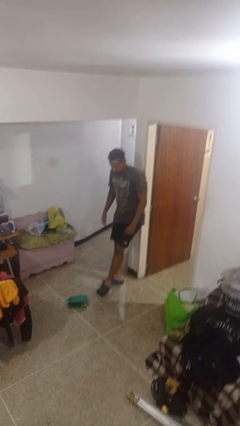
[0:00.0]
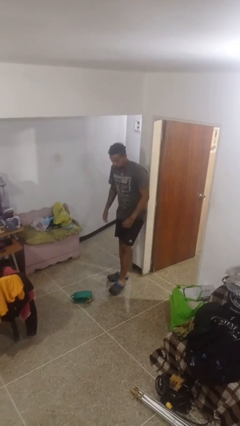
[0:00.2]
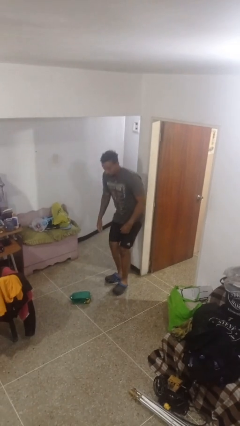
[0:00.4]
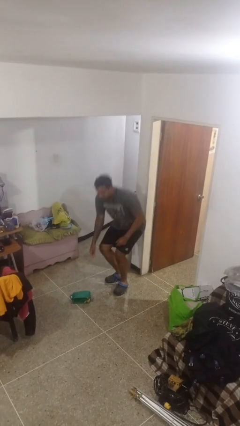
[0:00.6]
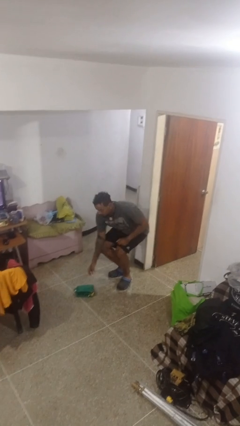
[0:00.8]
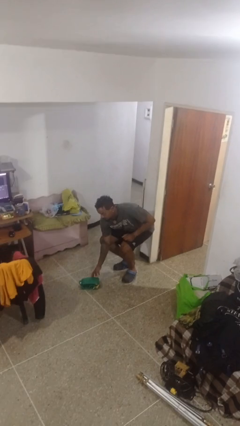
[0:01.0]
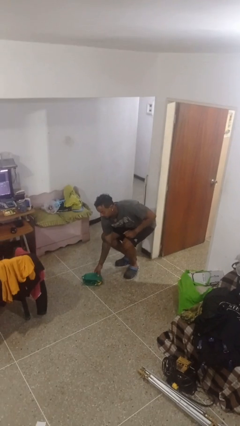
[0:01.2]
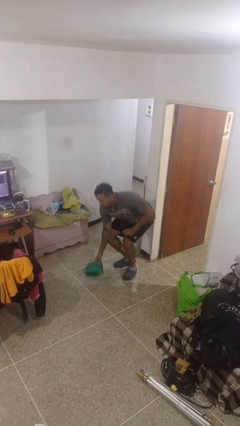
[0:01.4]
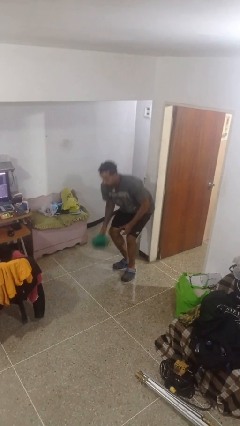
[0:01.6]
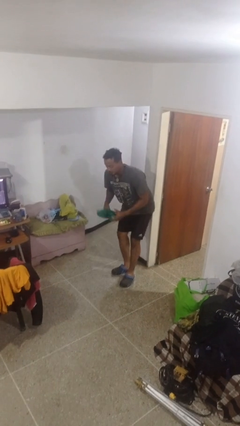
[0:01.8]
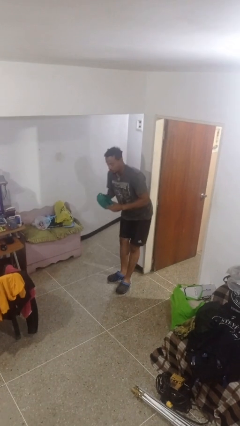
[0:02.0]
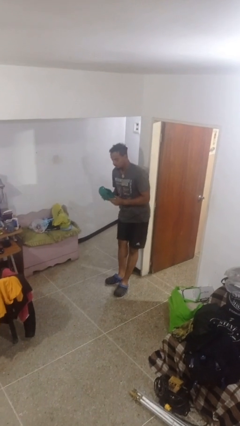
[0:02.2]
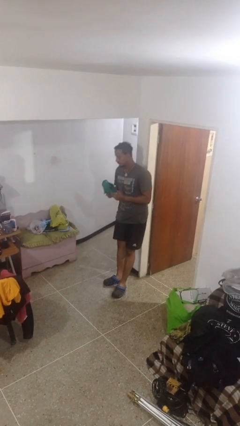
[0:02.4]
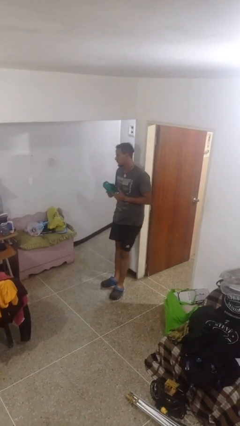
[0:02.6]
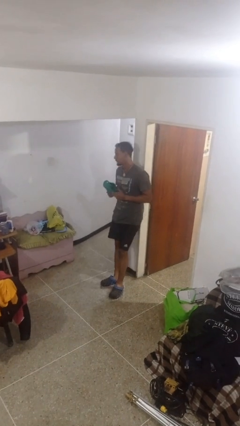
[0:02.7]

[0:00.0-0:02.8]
person picks up object from floor

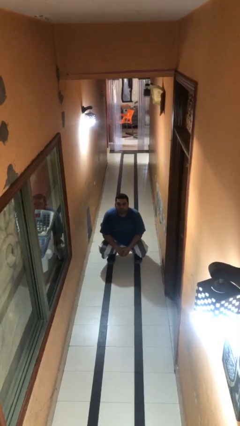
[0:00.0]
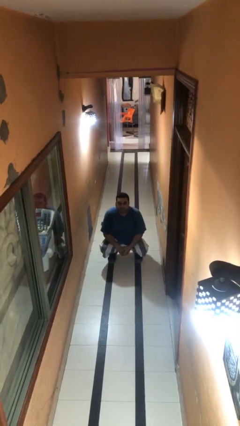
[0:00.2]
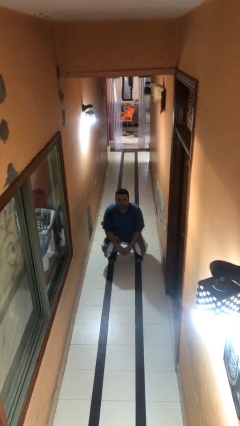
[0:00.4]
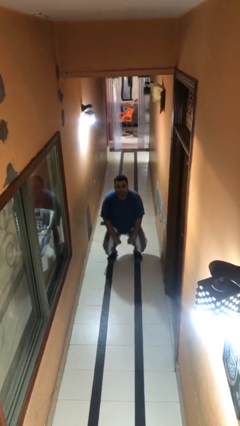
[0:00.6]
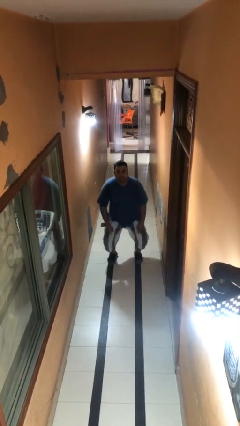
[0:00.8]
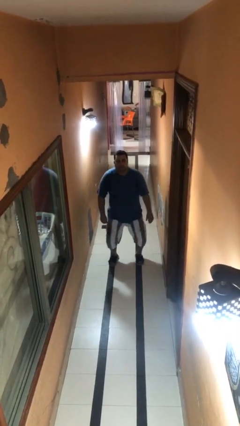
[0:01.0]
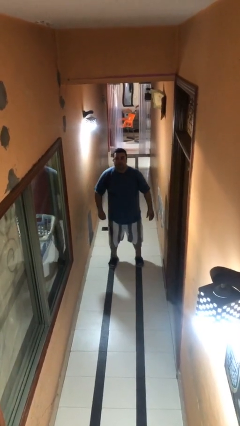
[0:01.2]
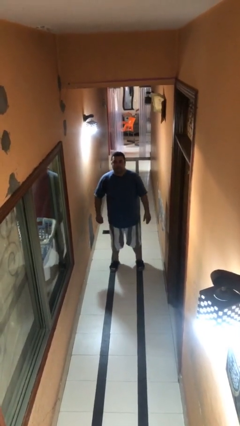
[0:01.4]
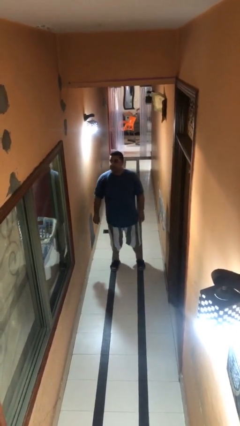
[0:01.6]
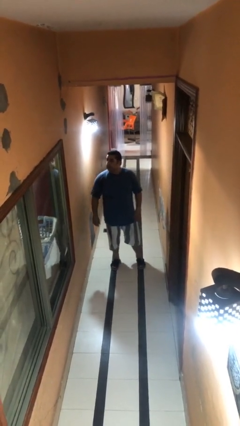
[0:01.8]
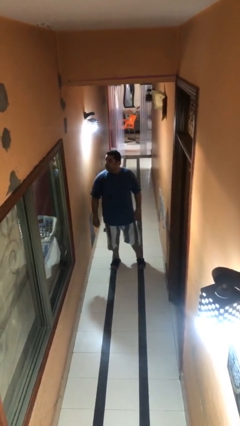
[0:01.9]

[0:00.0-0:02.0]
person stands up

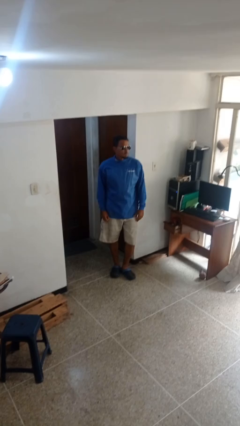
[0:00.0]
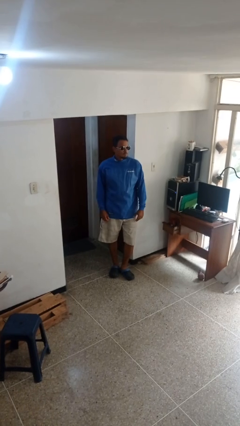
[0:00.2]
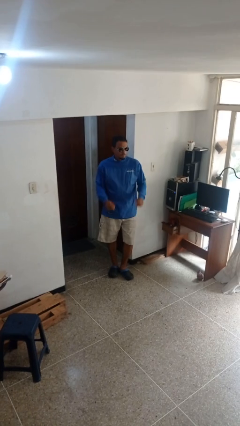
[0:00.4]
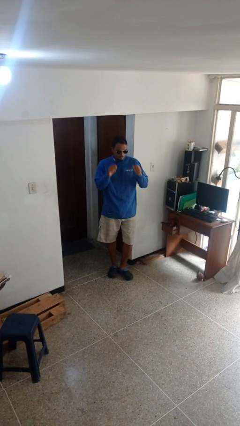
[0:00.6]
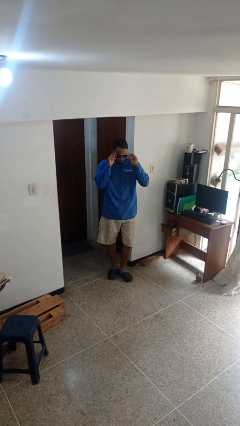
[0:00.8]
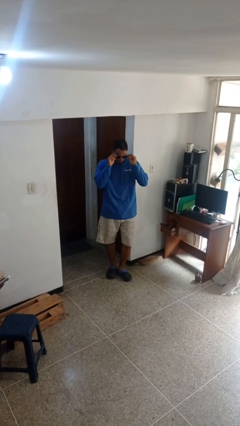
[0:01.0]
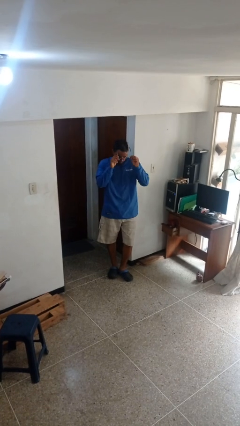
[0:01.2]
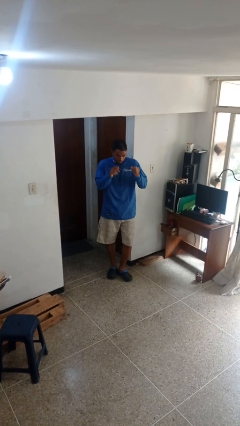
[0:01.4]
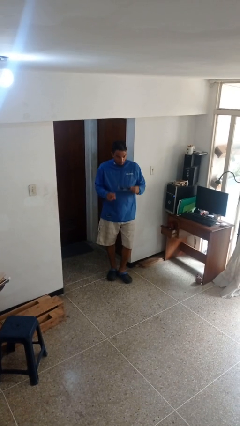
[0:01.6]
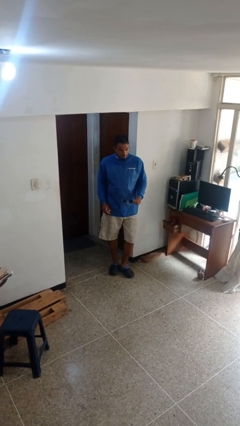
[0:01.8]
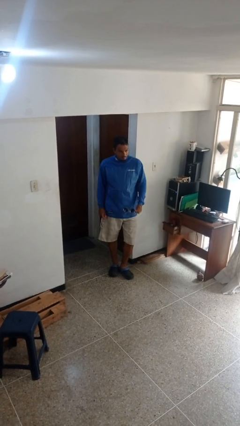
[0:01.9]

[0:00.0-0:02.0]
person takes off sunglasses

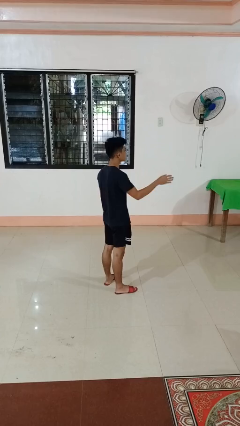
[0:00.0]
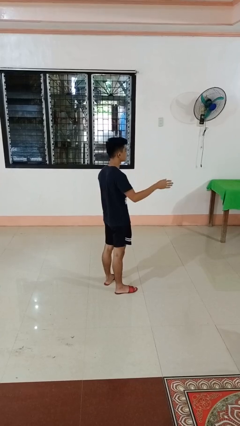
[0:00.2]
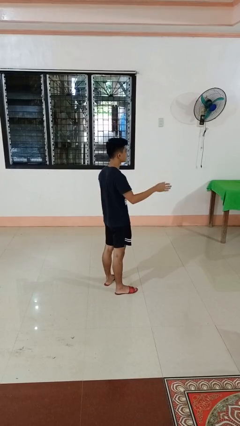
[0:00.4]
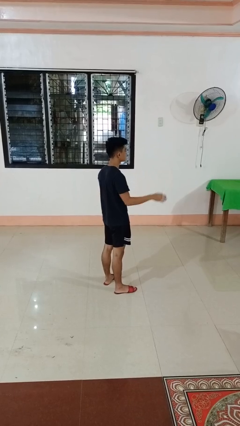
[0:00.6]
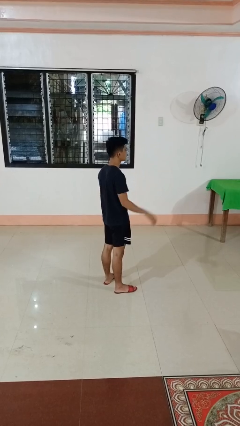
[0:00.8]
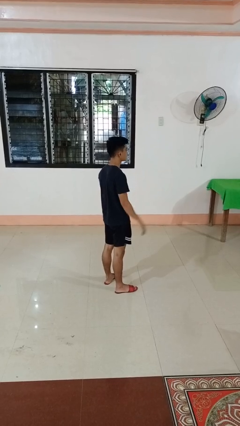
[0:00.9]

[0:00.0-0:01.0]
person gestures swipe right

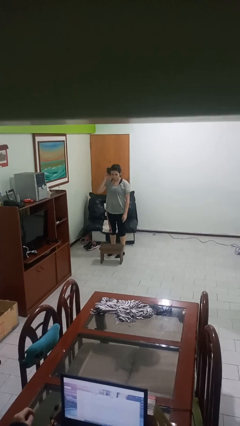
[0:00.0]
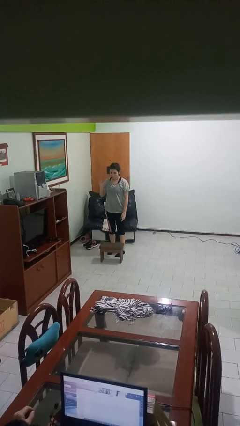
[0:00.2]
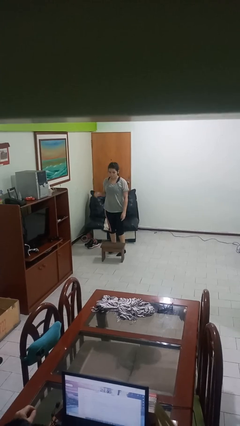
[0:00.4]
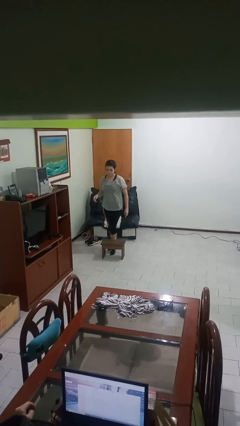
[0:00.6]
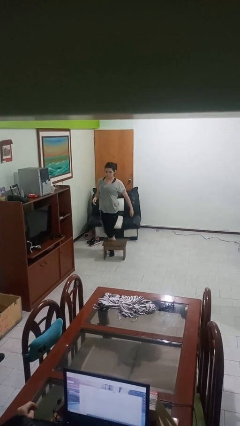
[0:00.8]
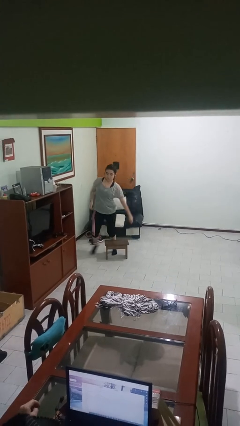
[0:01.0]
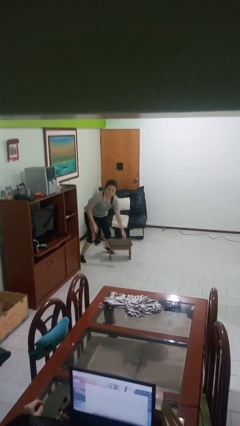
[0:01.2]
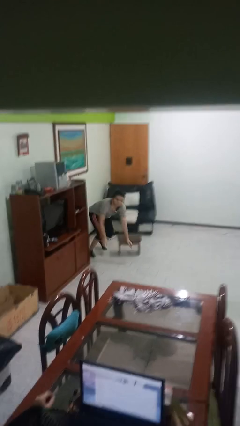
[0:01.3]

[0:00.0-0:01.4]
person trips on object on floor

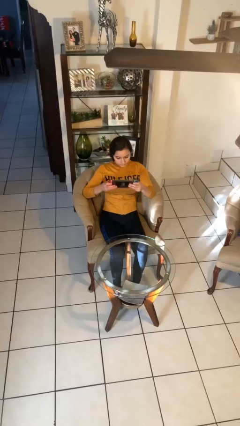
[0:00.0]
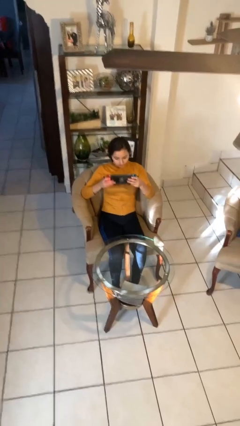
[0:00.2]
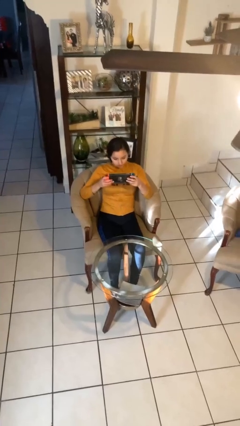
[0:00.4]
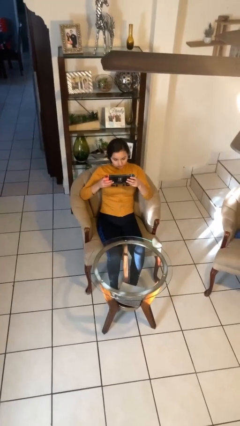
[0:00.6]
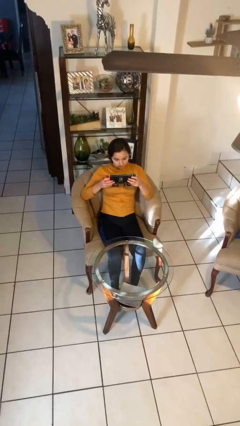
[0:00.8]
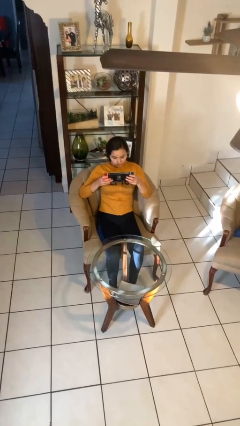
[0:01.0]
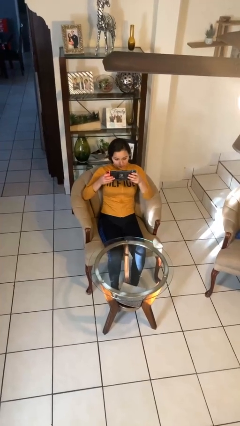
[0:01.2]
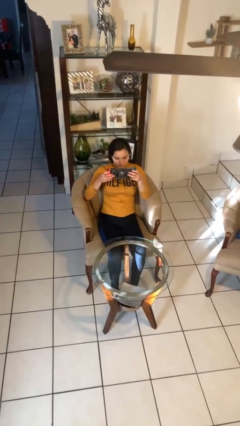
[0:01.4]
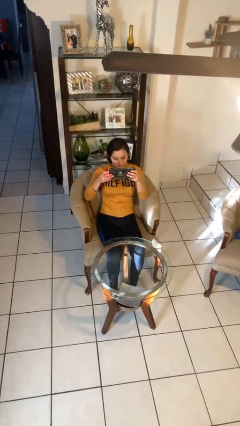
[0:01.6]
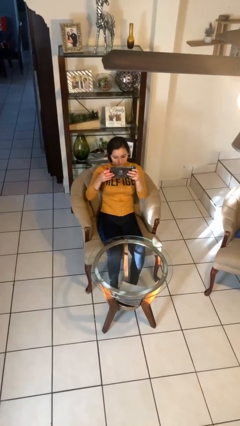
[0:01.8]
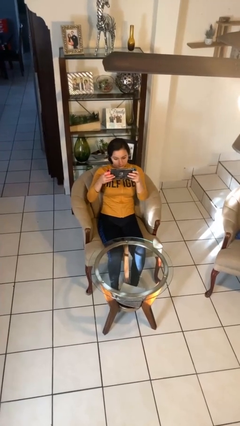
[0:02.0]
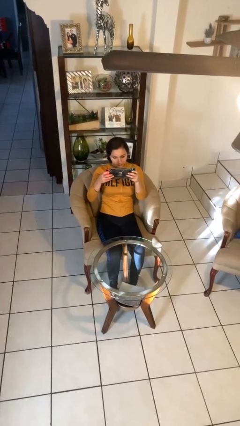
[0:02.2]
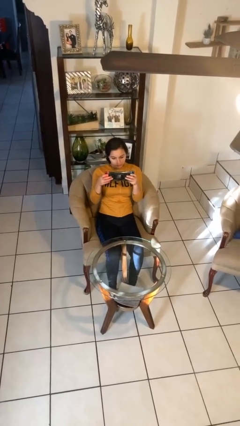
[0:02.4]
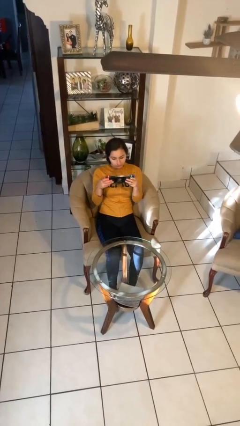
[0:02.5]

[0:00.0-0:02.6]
person interacts with handheld game

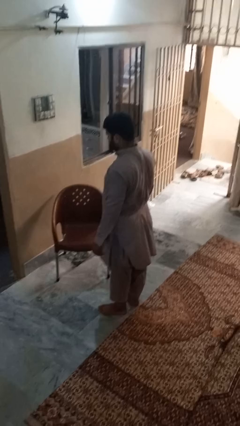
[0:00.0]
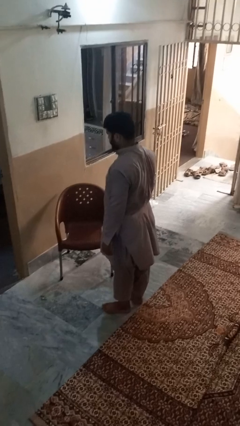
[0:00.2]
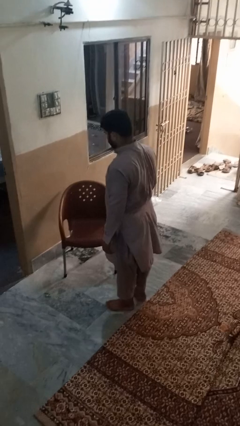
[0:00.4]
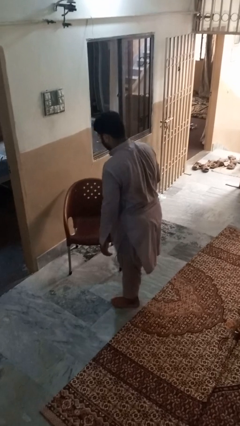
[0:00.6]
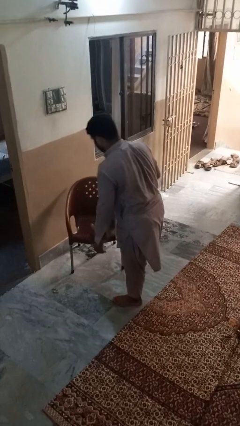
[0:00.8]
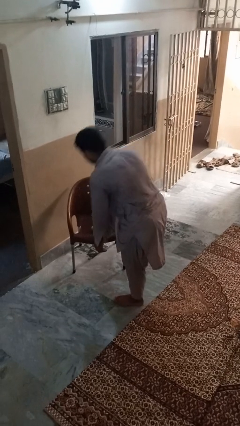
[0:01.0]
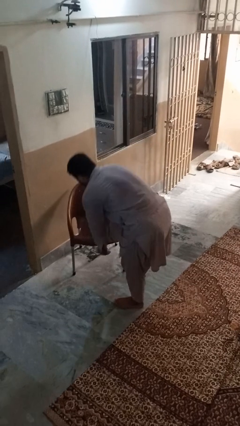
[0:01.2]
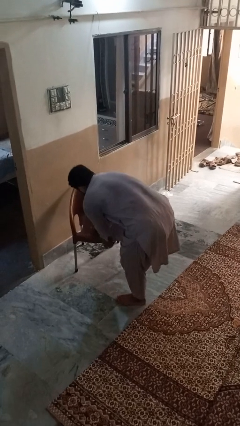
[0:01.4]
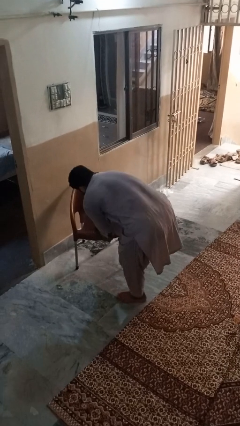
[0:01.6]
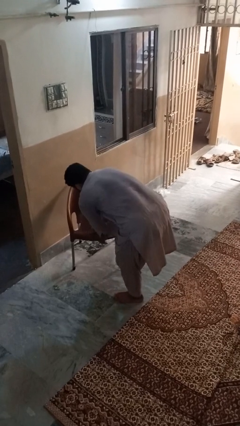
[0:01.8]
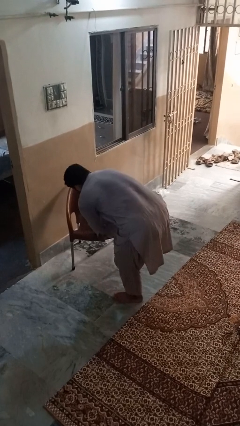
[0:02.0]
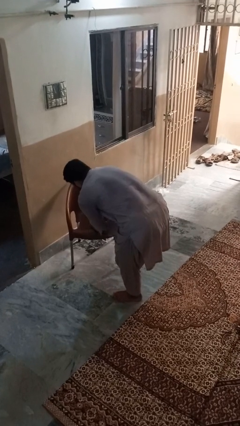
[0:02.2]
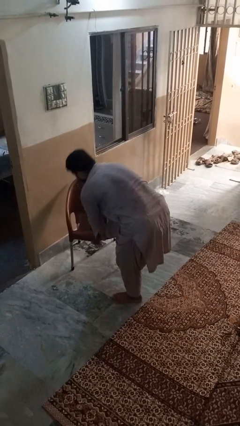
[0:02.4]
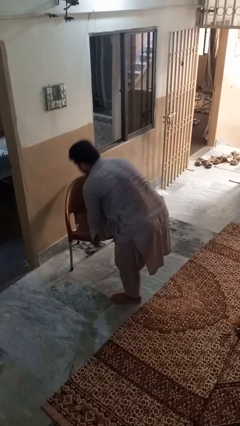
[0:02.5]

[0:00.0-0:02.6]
person stubs toe

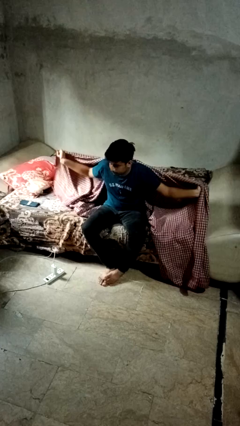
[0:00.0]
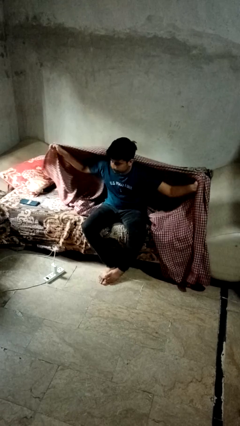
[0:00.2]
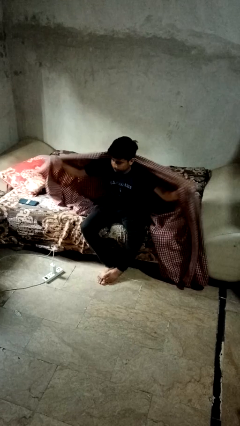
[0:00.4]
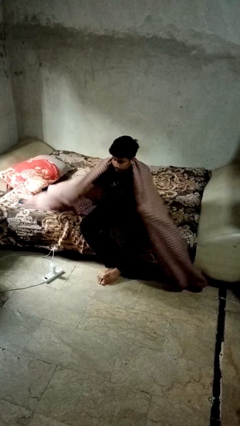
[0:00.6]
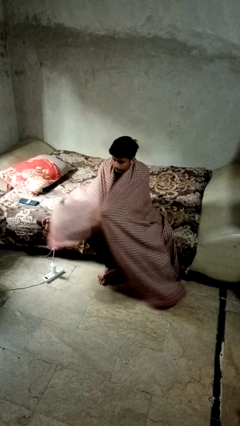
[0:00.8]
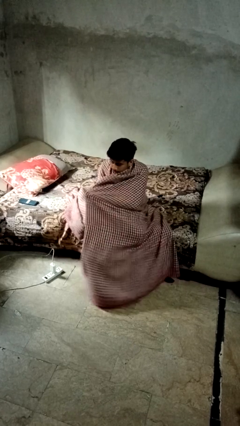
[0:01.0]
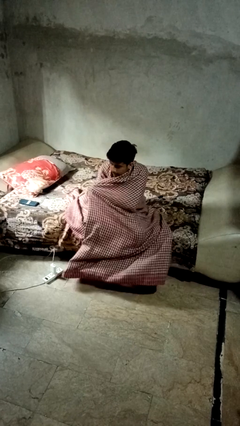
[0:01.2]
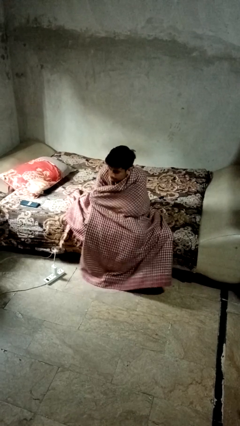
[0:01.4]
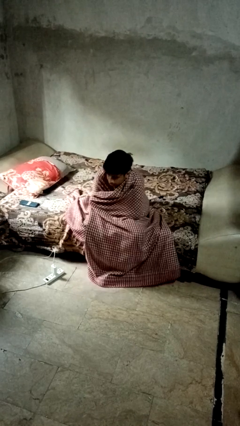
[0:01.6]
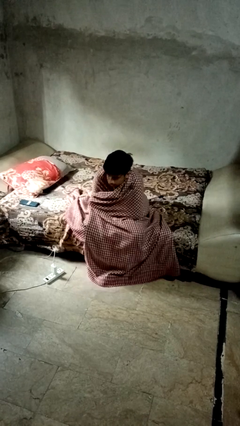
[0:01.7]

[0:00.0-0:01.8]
person covers with blanket

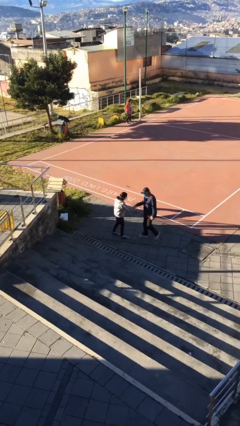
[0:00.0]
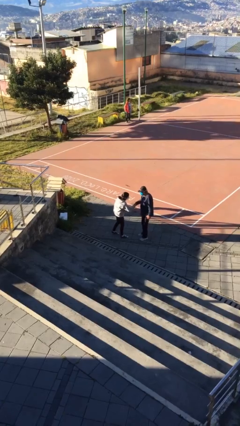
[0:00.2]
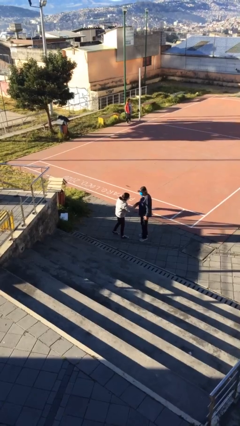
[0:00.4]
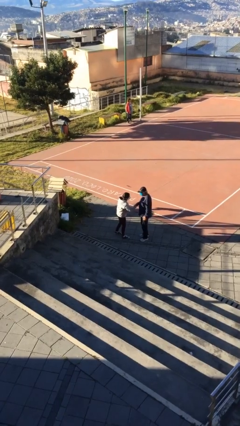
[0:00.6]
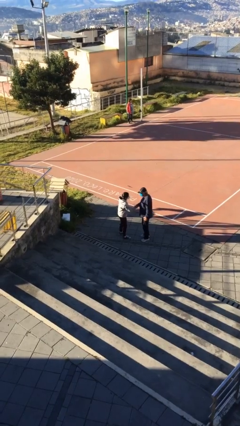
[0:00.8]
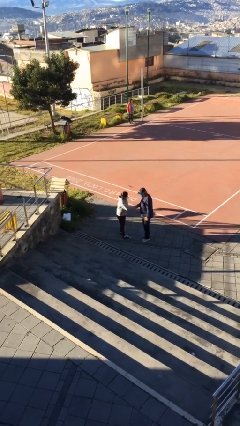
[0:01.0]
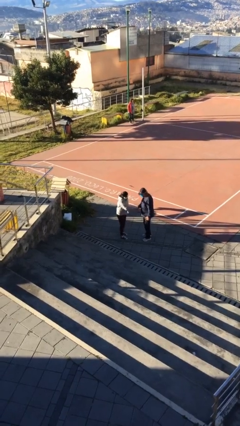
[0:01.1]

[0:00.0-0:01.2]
person shakes hand
